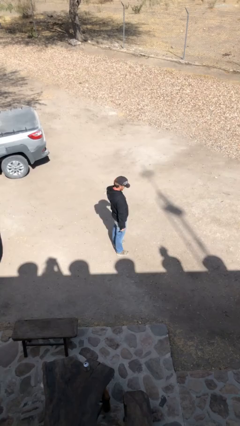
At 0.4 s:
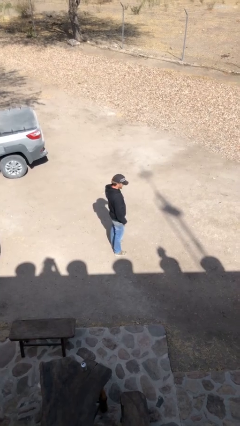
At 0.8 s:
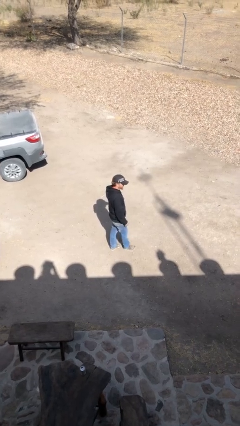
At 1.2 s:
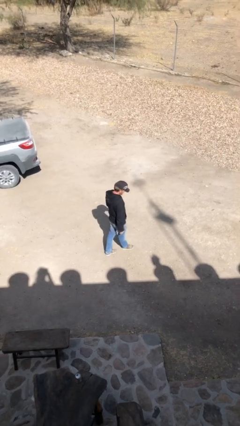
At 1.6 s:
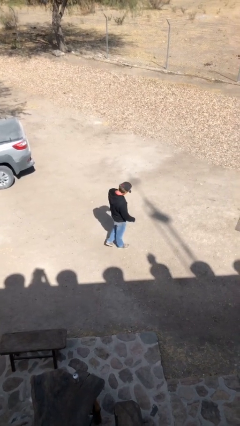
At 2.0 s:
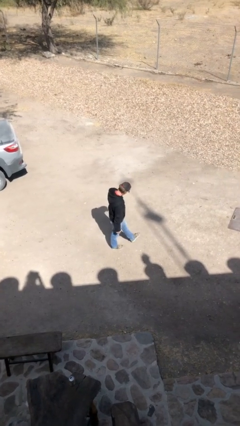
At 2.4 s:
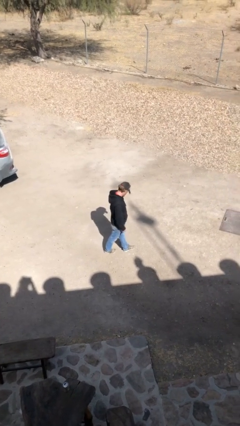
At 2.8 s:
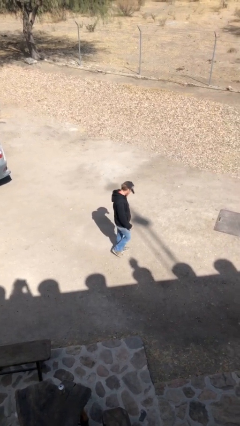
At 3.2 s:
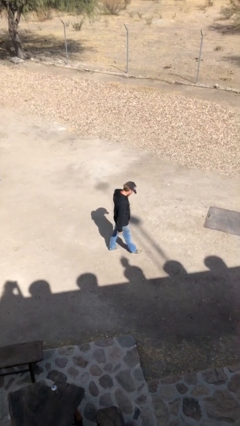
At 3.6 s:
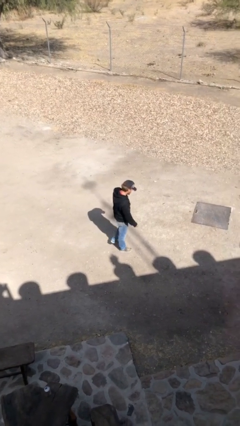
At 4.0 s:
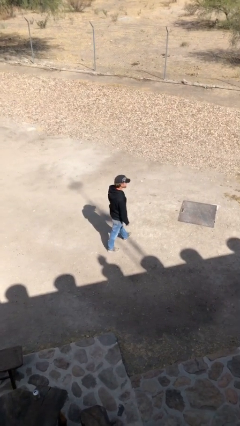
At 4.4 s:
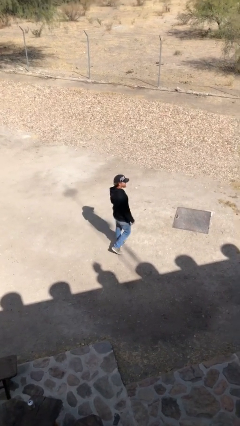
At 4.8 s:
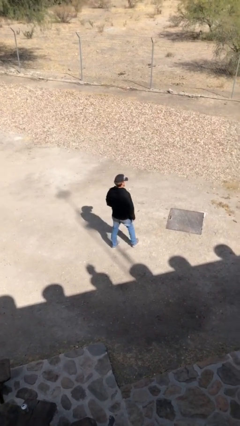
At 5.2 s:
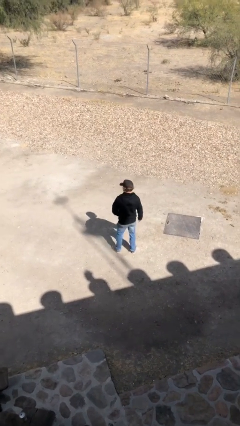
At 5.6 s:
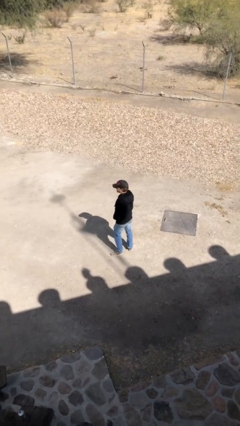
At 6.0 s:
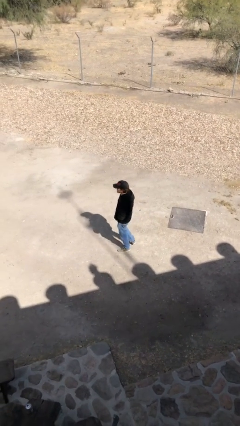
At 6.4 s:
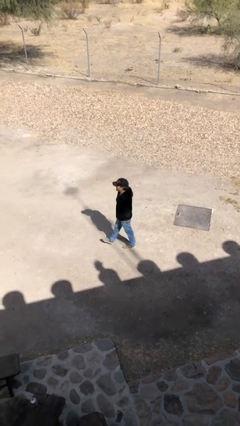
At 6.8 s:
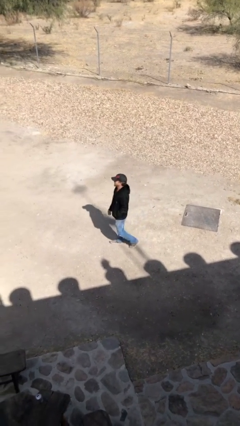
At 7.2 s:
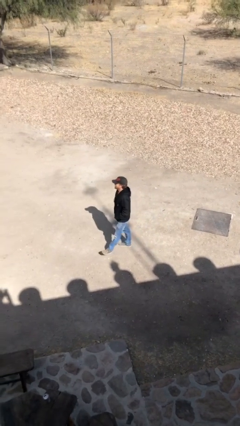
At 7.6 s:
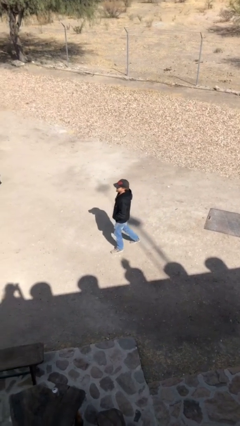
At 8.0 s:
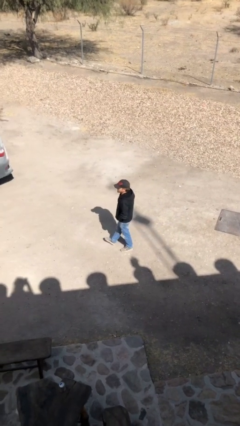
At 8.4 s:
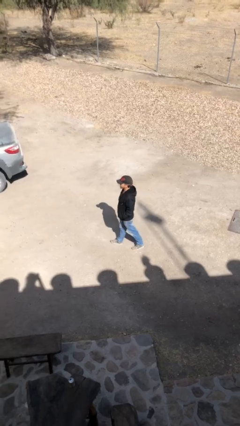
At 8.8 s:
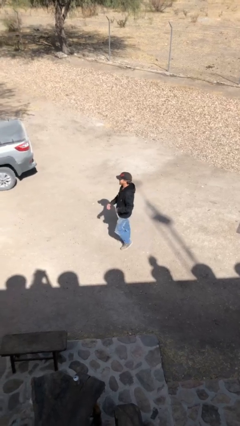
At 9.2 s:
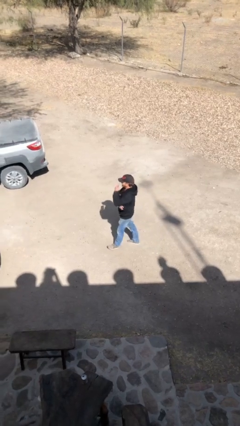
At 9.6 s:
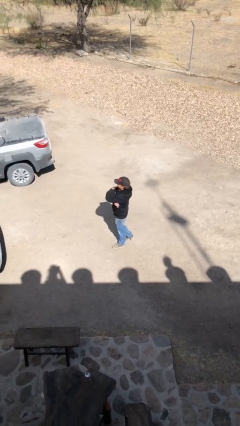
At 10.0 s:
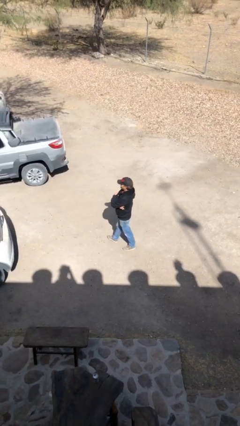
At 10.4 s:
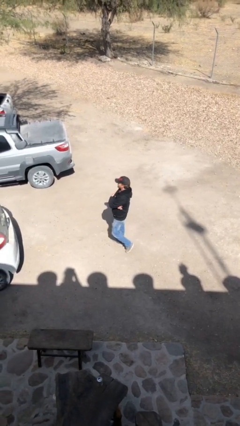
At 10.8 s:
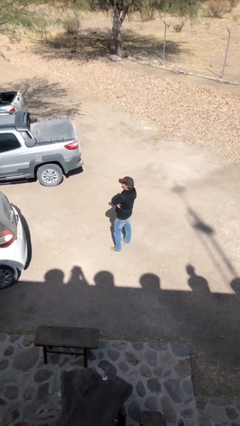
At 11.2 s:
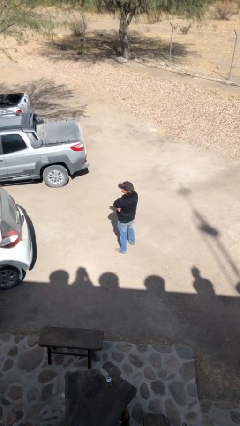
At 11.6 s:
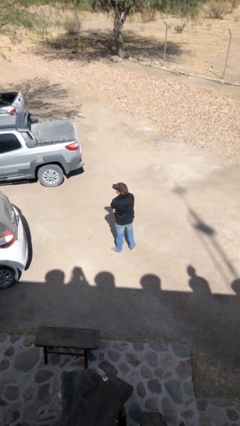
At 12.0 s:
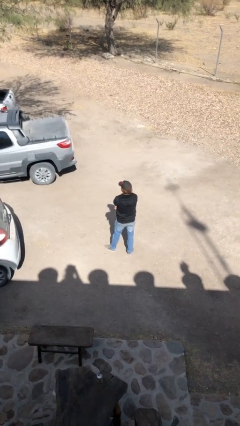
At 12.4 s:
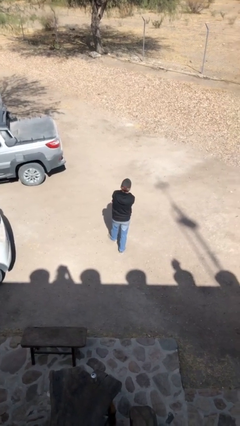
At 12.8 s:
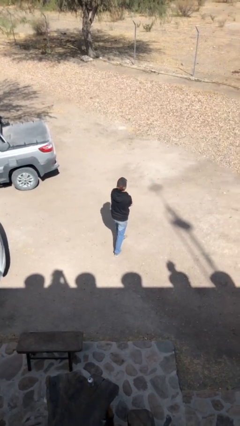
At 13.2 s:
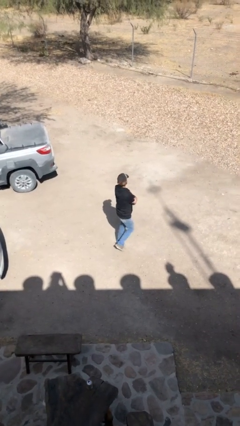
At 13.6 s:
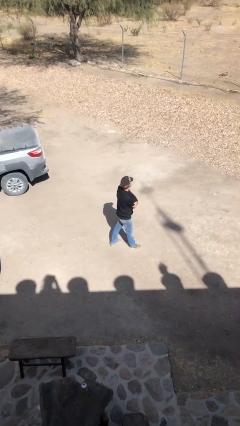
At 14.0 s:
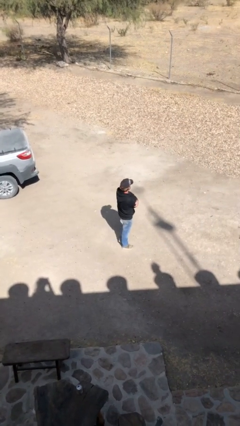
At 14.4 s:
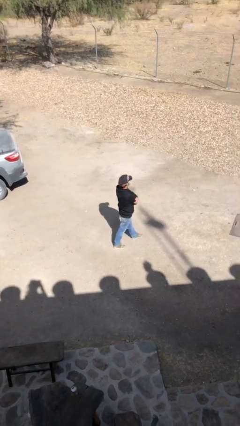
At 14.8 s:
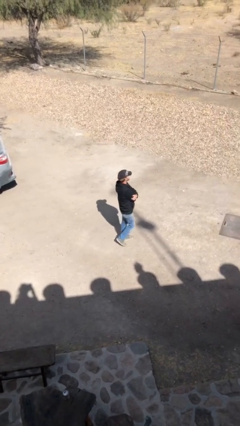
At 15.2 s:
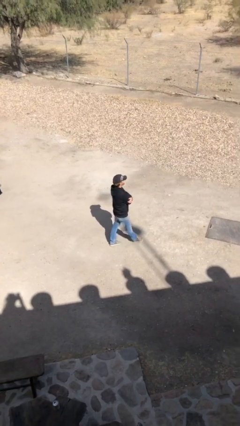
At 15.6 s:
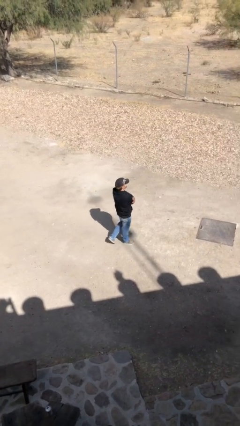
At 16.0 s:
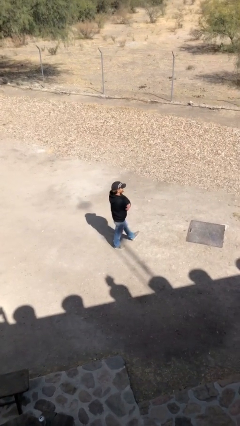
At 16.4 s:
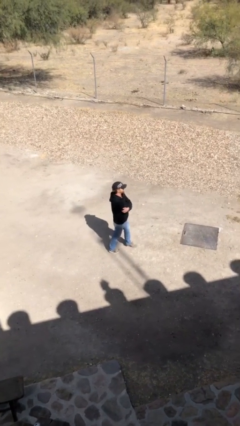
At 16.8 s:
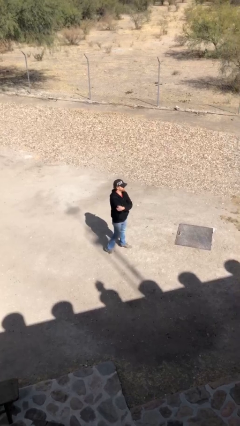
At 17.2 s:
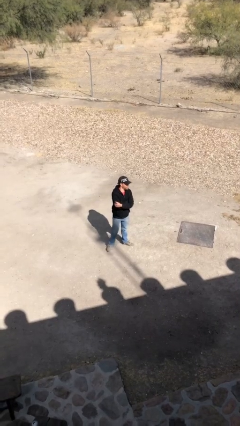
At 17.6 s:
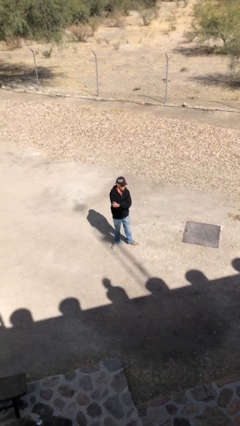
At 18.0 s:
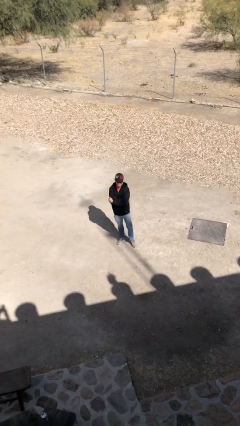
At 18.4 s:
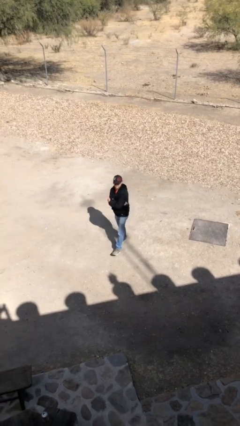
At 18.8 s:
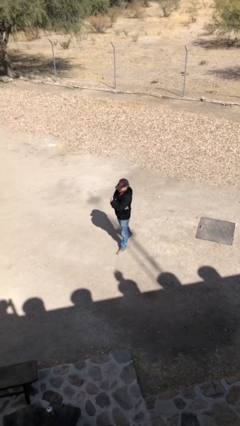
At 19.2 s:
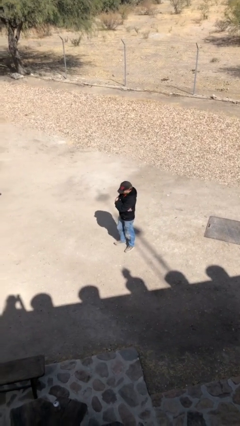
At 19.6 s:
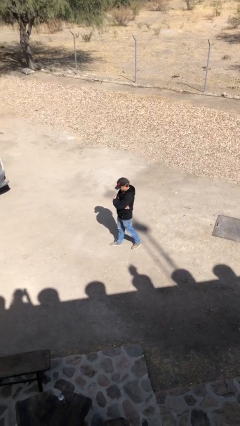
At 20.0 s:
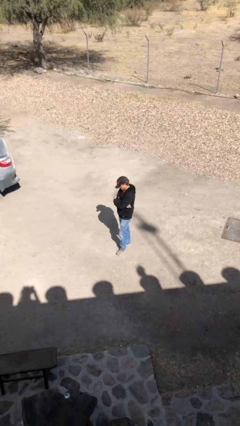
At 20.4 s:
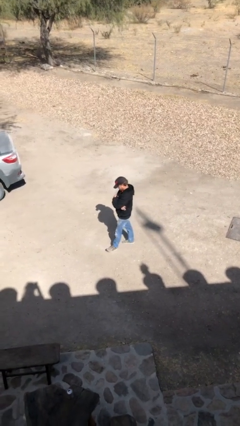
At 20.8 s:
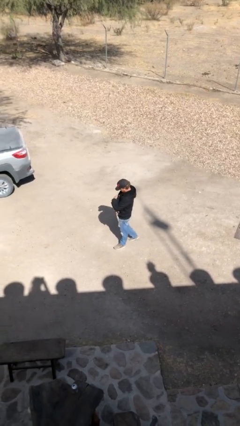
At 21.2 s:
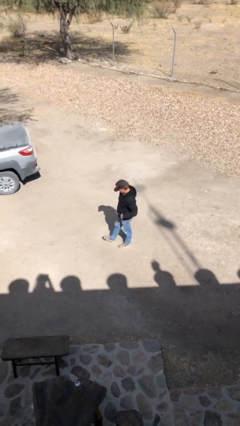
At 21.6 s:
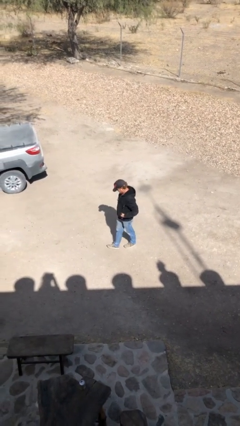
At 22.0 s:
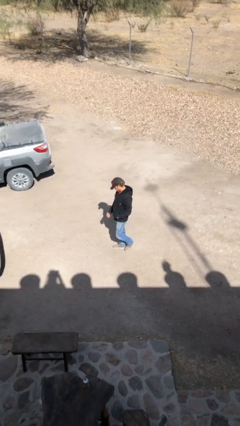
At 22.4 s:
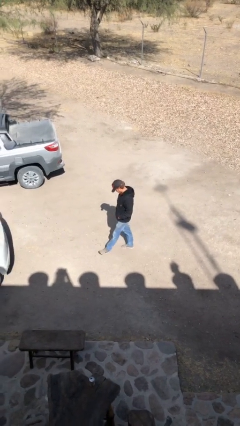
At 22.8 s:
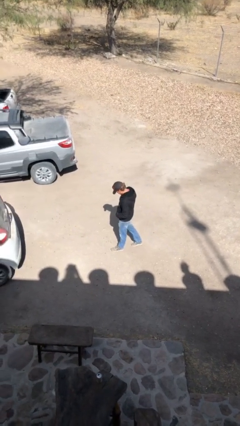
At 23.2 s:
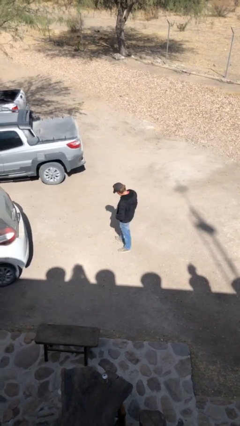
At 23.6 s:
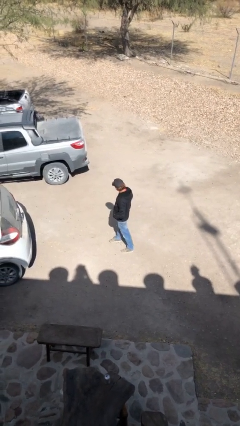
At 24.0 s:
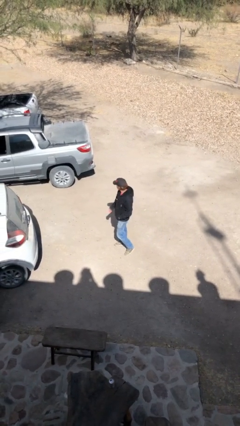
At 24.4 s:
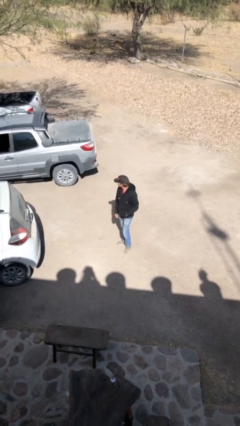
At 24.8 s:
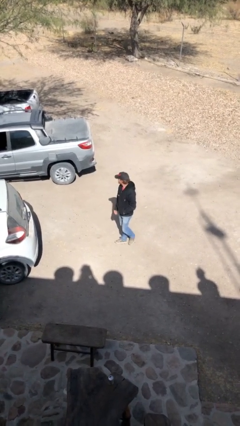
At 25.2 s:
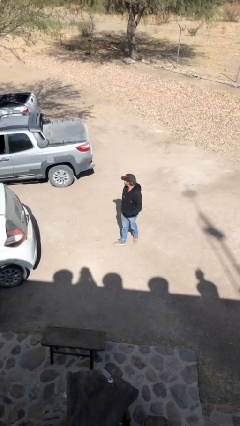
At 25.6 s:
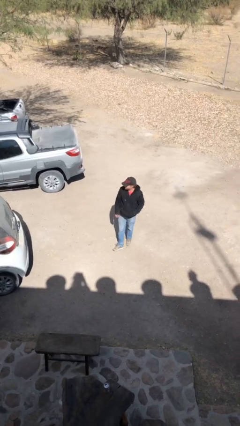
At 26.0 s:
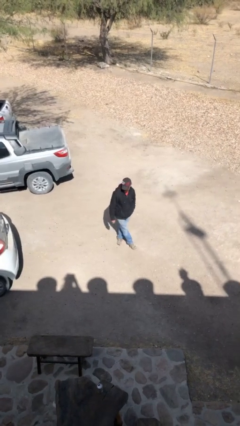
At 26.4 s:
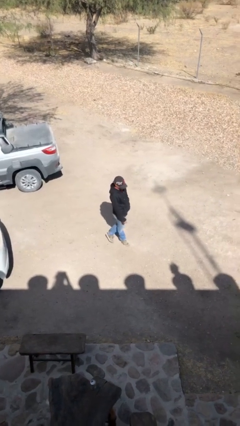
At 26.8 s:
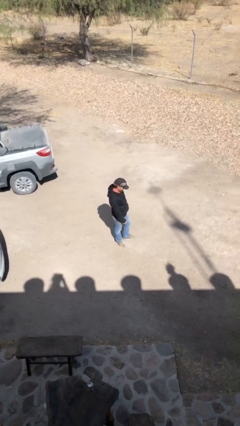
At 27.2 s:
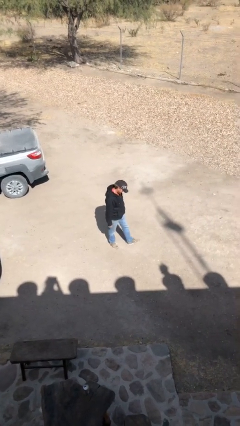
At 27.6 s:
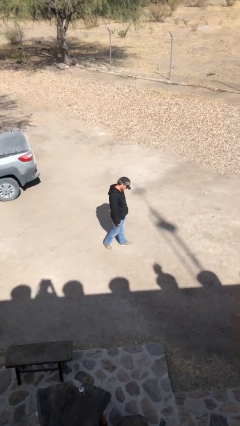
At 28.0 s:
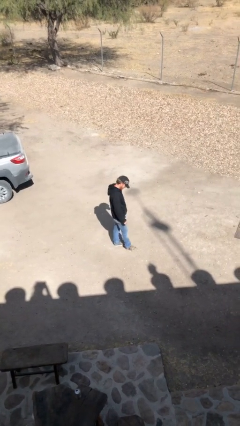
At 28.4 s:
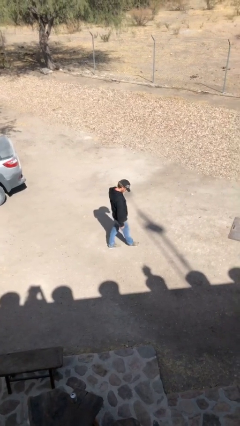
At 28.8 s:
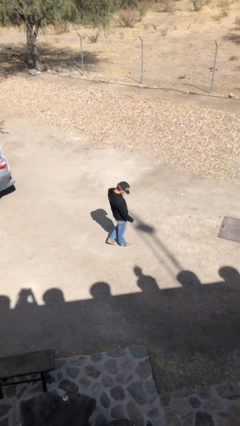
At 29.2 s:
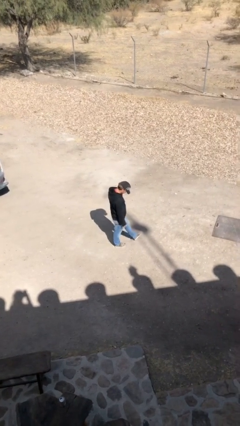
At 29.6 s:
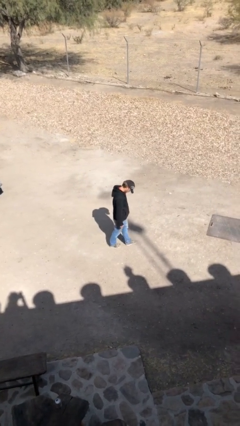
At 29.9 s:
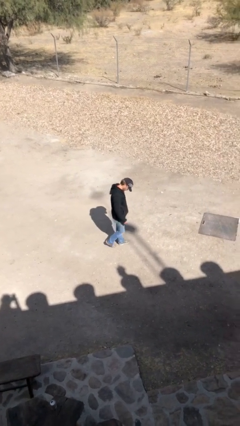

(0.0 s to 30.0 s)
person walks

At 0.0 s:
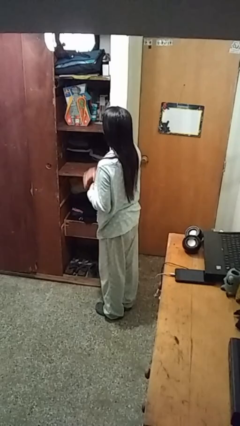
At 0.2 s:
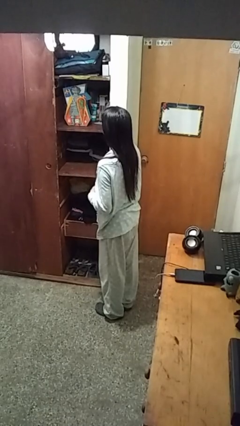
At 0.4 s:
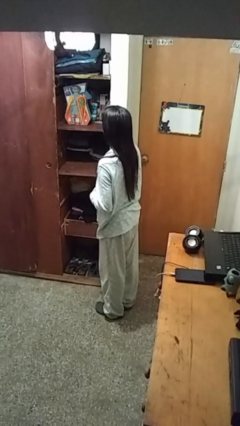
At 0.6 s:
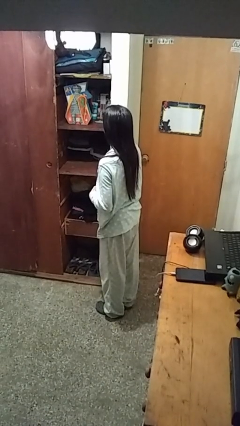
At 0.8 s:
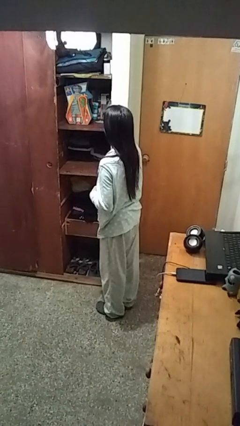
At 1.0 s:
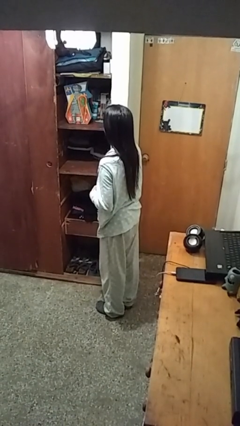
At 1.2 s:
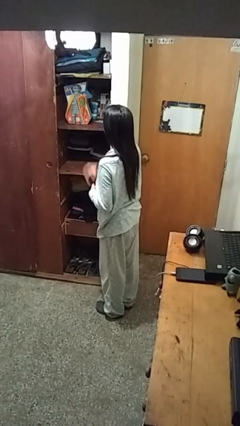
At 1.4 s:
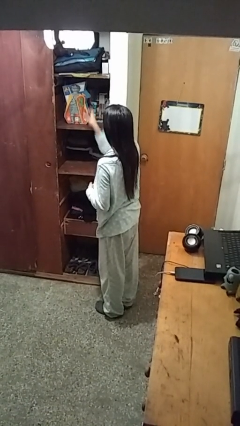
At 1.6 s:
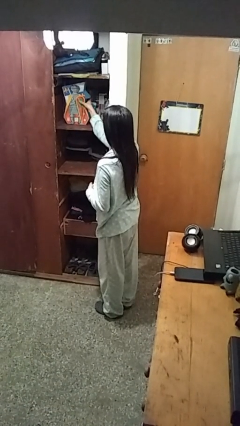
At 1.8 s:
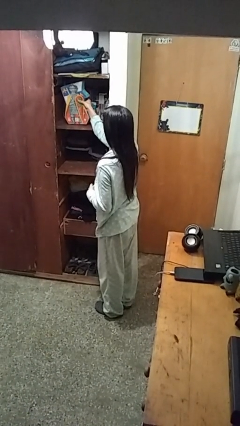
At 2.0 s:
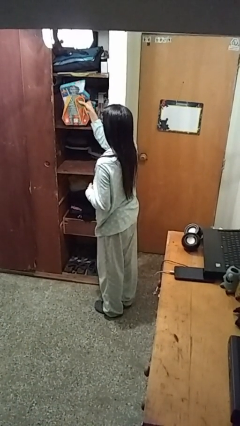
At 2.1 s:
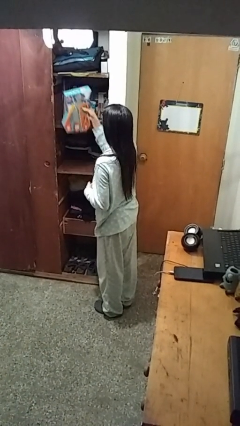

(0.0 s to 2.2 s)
person puts down object on shelf

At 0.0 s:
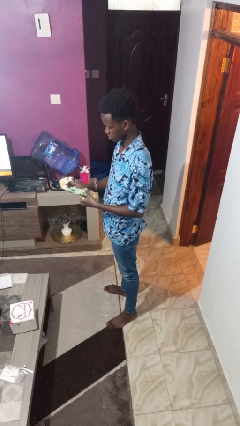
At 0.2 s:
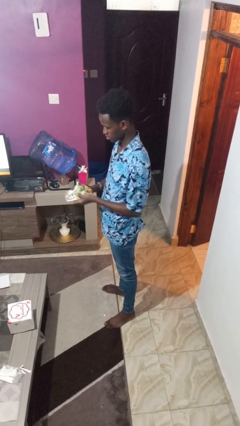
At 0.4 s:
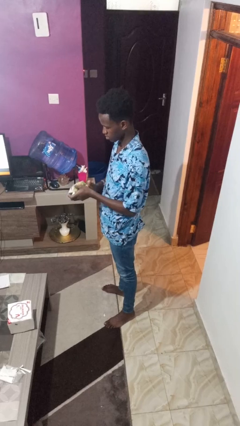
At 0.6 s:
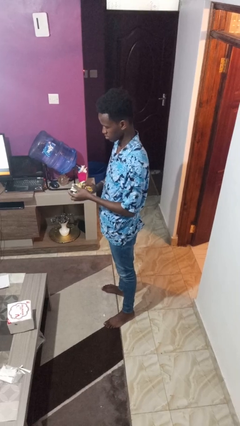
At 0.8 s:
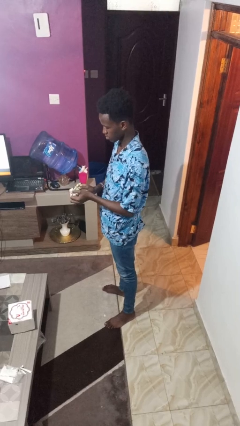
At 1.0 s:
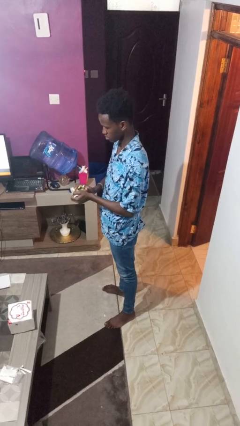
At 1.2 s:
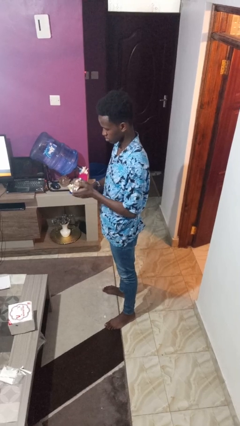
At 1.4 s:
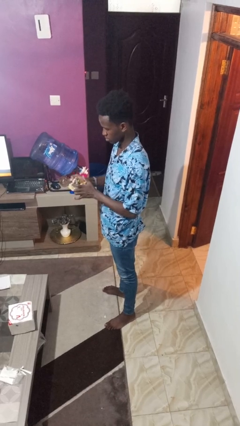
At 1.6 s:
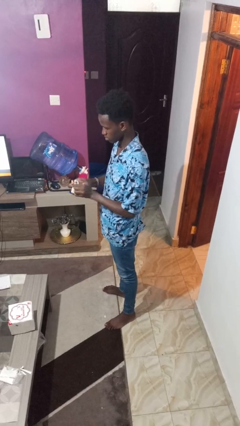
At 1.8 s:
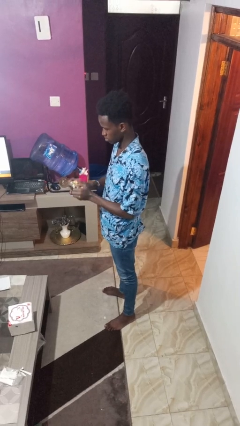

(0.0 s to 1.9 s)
person crumples paper
